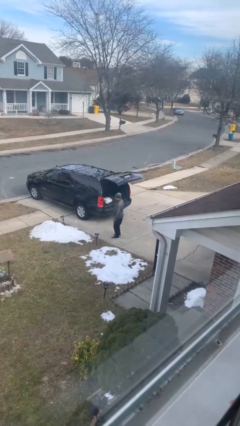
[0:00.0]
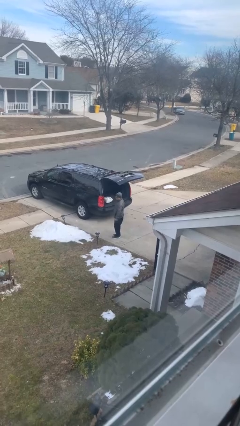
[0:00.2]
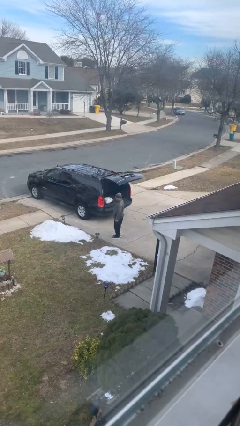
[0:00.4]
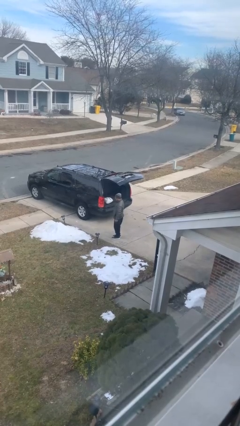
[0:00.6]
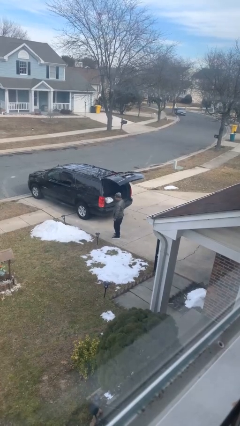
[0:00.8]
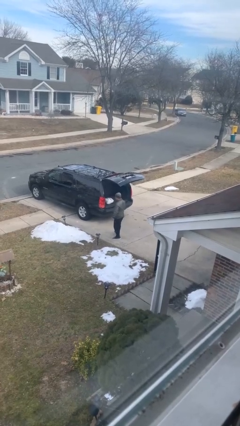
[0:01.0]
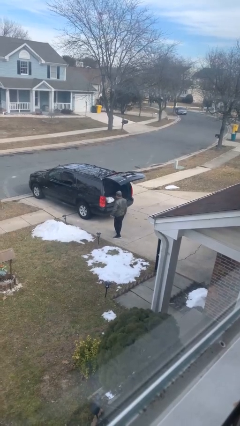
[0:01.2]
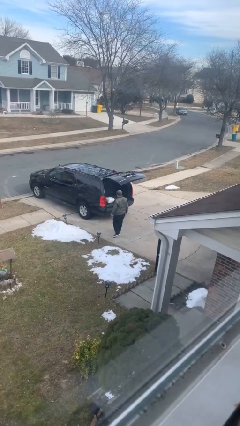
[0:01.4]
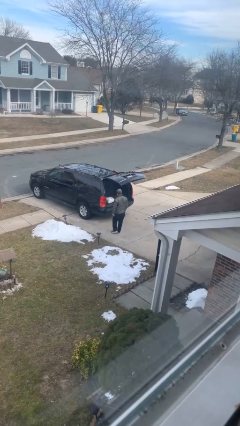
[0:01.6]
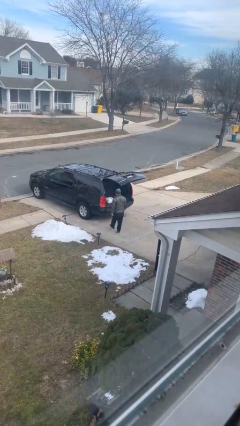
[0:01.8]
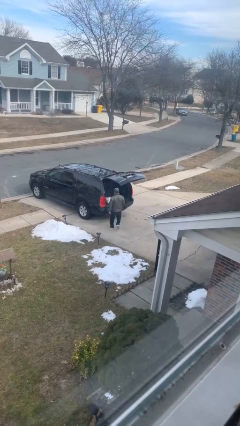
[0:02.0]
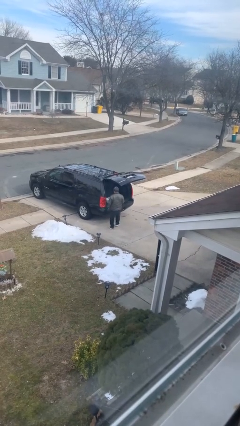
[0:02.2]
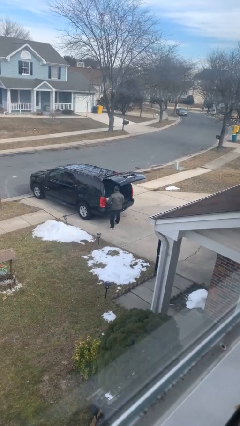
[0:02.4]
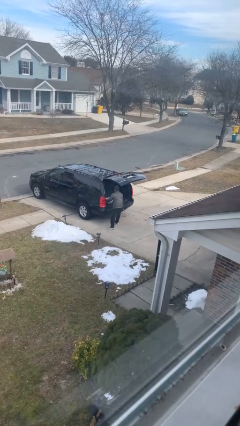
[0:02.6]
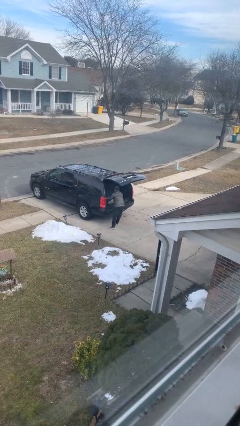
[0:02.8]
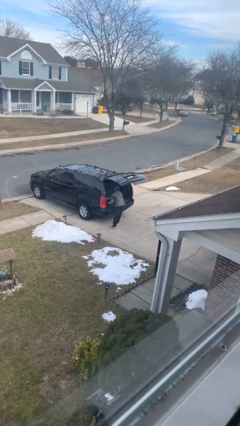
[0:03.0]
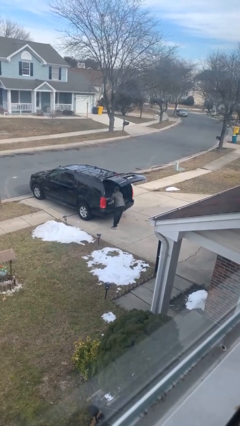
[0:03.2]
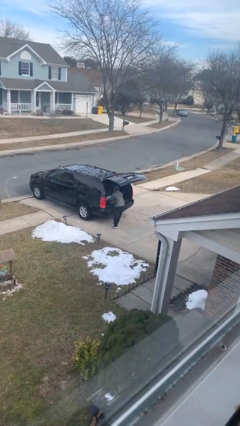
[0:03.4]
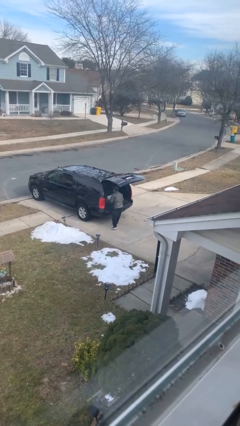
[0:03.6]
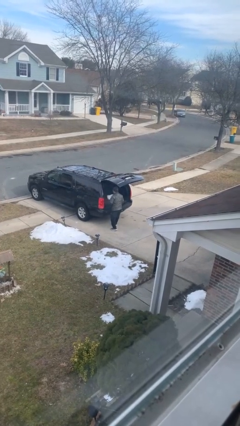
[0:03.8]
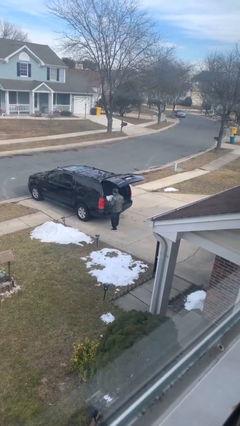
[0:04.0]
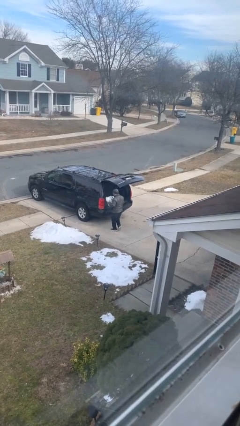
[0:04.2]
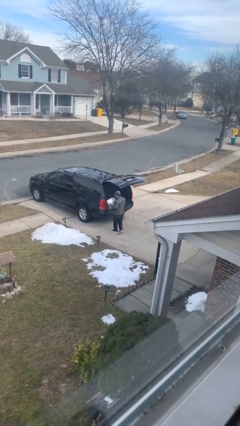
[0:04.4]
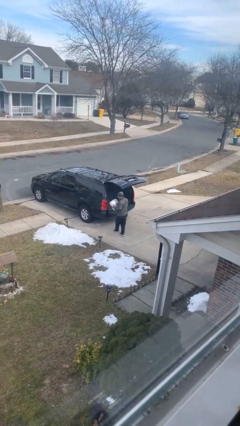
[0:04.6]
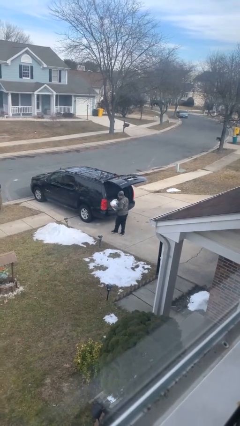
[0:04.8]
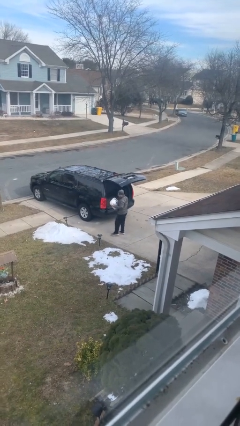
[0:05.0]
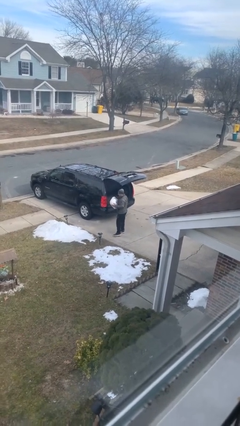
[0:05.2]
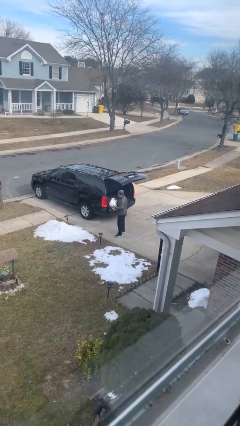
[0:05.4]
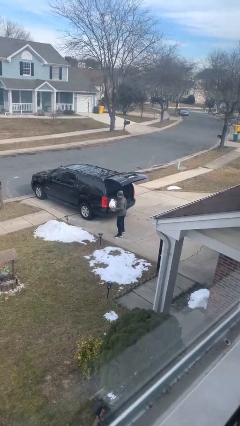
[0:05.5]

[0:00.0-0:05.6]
person unloads car

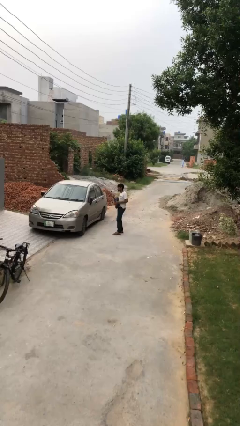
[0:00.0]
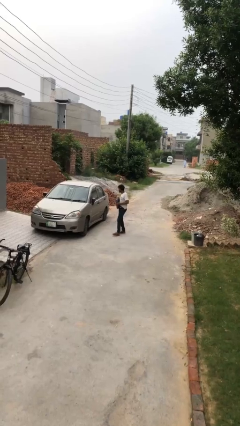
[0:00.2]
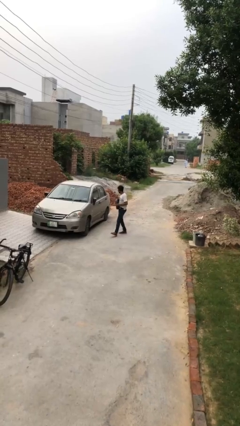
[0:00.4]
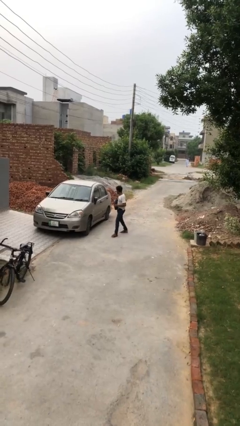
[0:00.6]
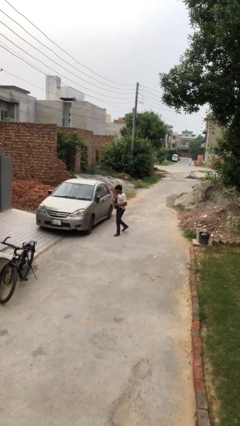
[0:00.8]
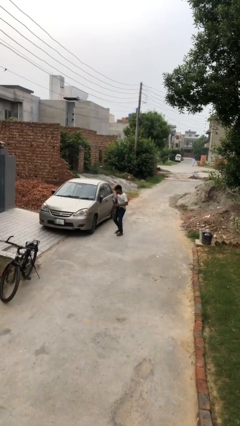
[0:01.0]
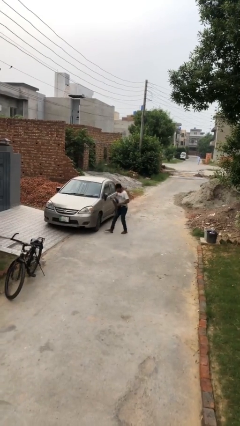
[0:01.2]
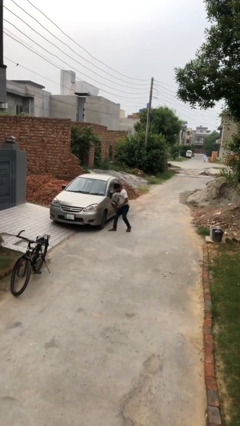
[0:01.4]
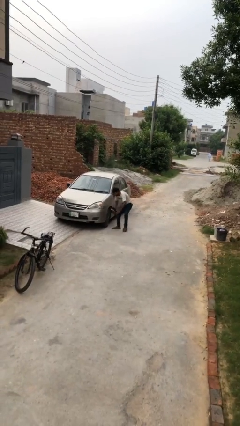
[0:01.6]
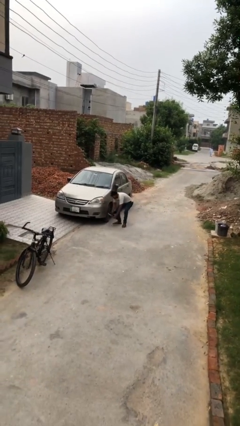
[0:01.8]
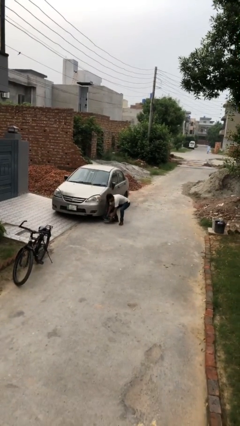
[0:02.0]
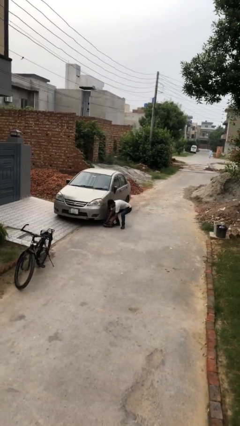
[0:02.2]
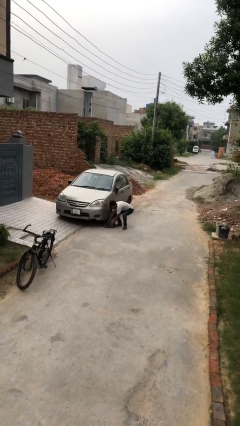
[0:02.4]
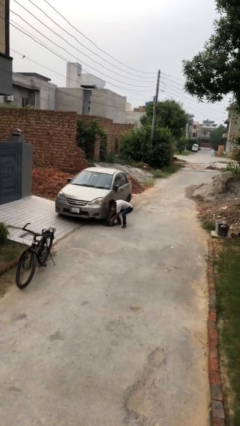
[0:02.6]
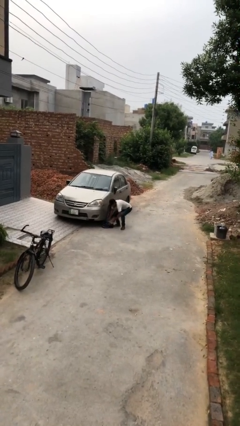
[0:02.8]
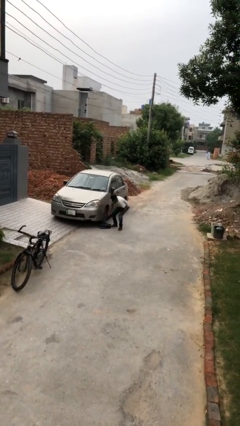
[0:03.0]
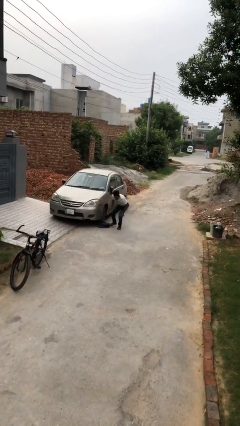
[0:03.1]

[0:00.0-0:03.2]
person puts down object on floor

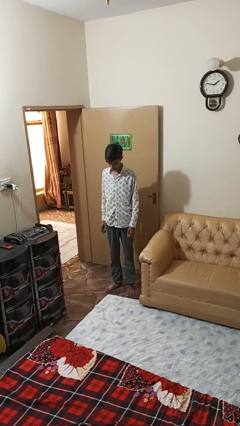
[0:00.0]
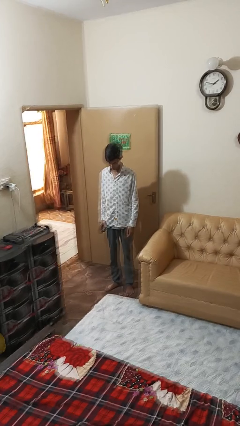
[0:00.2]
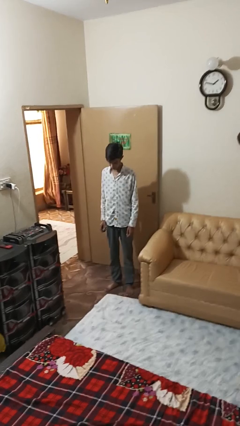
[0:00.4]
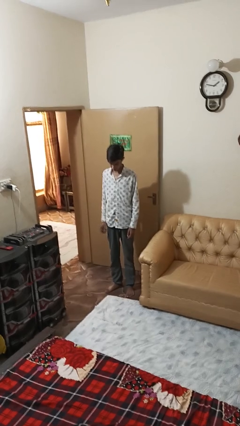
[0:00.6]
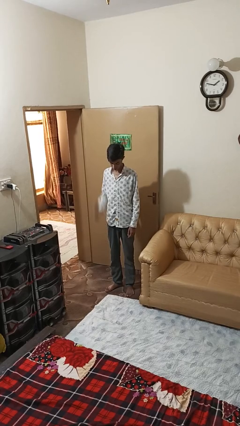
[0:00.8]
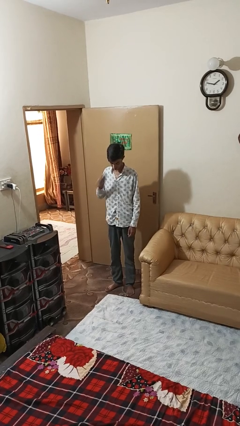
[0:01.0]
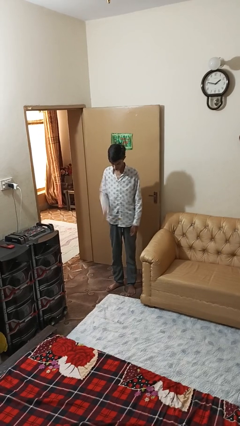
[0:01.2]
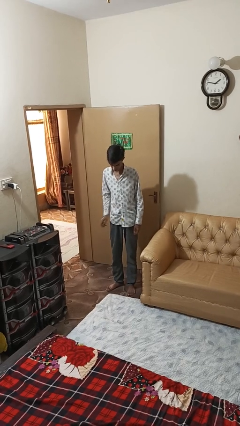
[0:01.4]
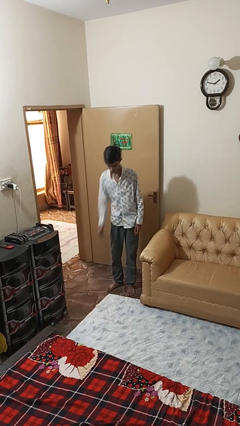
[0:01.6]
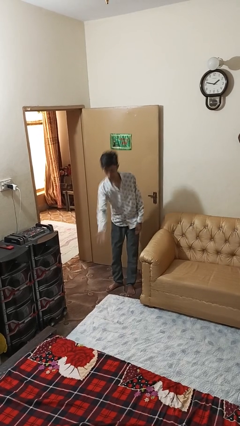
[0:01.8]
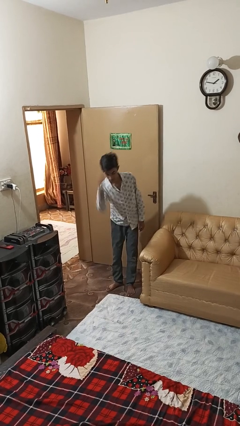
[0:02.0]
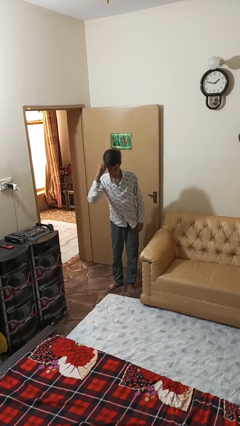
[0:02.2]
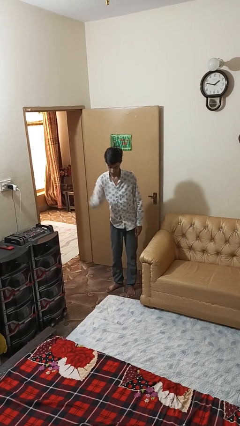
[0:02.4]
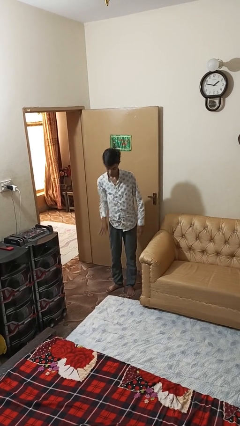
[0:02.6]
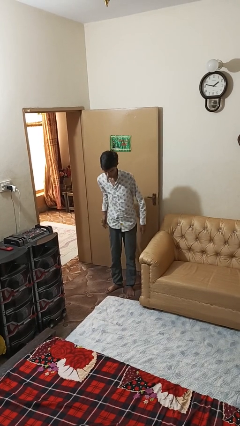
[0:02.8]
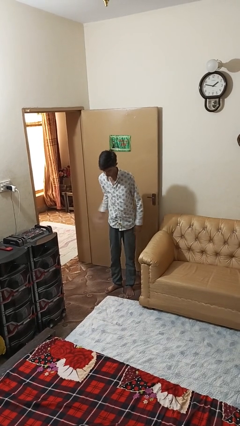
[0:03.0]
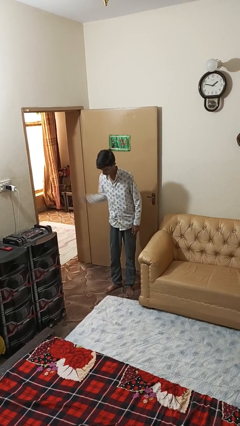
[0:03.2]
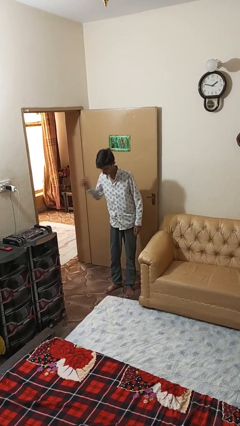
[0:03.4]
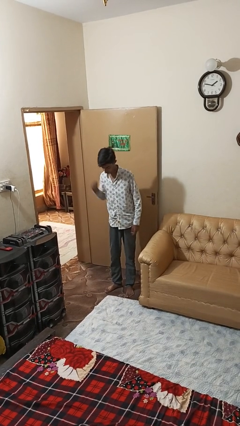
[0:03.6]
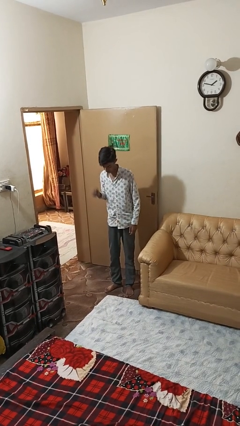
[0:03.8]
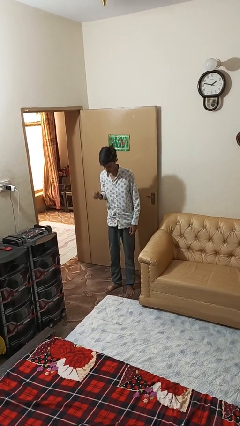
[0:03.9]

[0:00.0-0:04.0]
person bounces ball on floor

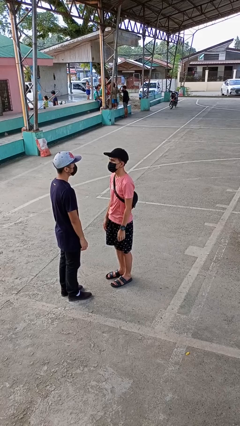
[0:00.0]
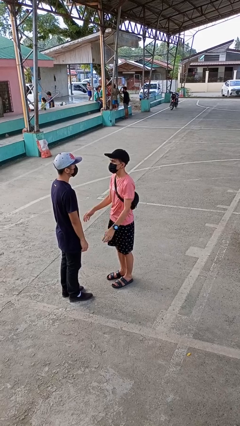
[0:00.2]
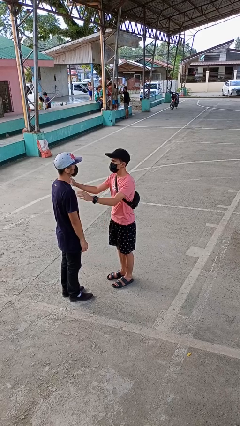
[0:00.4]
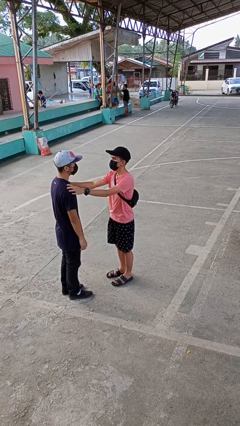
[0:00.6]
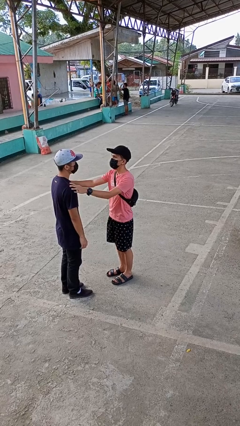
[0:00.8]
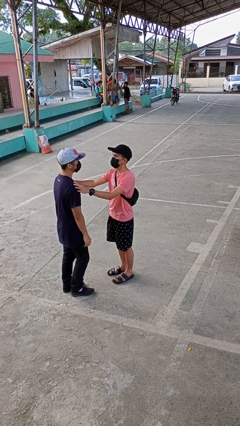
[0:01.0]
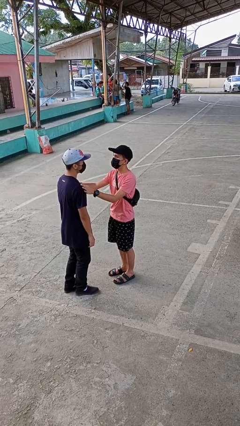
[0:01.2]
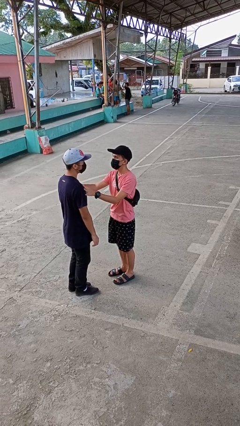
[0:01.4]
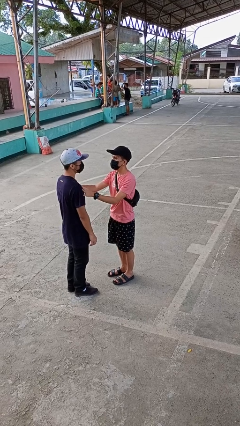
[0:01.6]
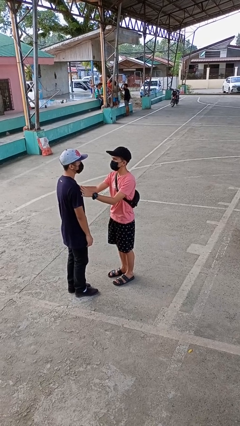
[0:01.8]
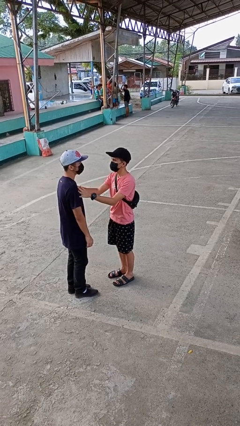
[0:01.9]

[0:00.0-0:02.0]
person grabs person by shoulder

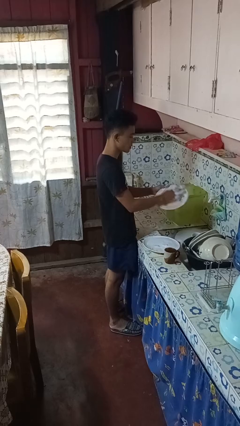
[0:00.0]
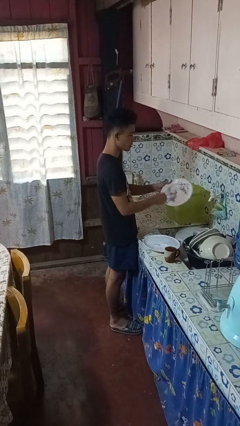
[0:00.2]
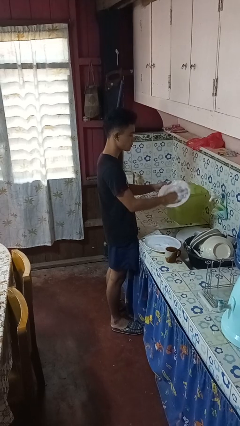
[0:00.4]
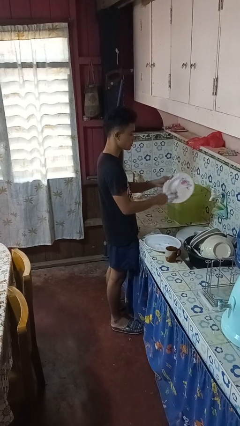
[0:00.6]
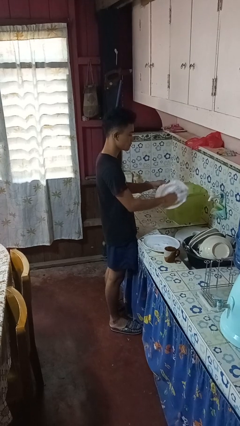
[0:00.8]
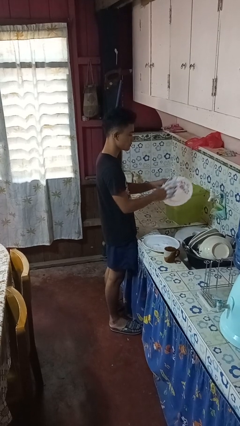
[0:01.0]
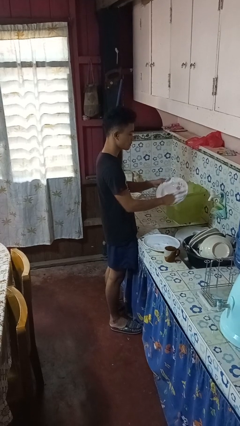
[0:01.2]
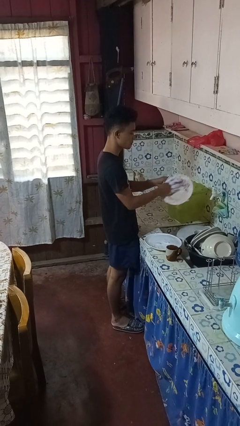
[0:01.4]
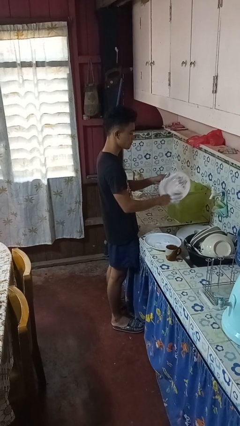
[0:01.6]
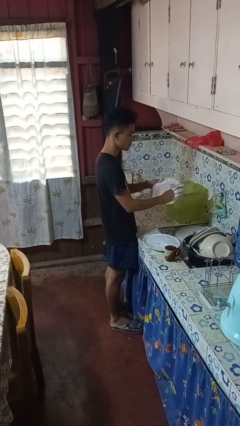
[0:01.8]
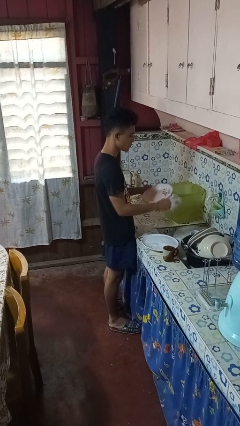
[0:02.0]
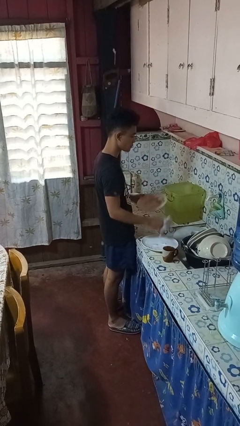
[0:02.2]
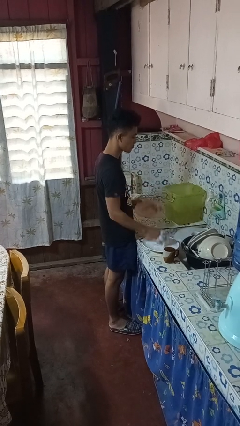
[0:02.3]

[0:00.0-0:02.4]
person washes dish
